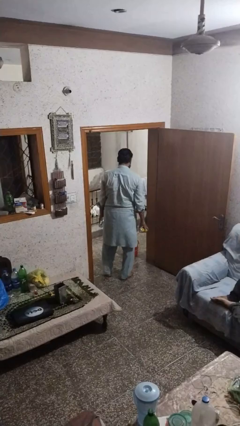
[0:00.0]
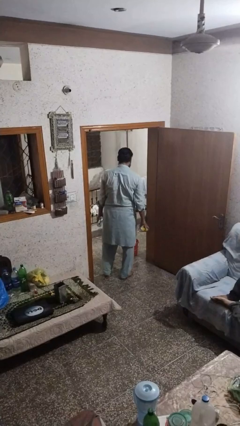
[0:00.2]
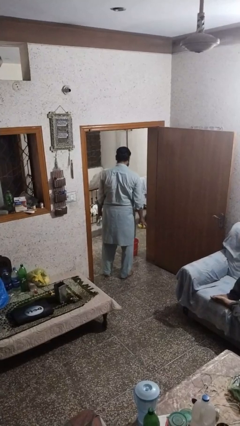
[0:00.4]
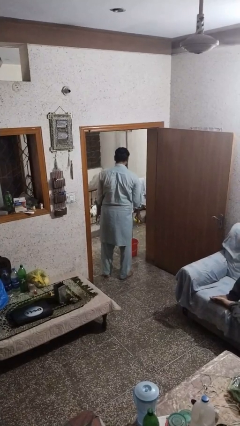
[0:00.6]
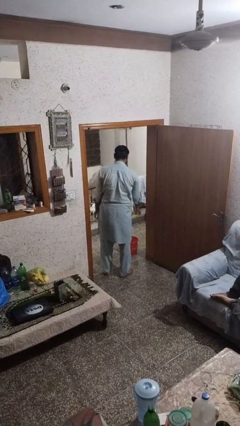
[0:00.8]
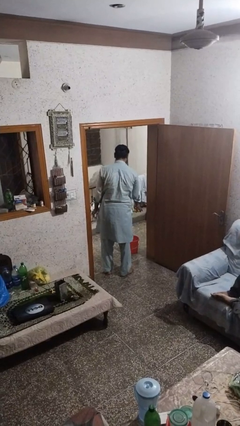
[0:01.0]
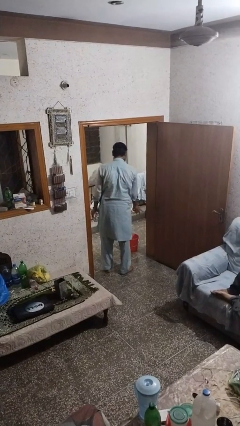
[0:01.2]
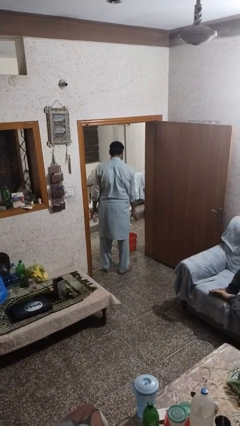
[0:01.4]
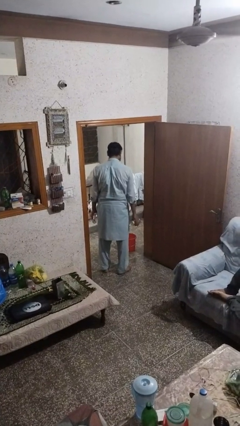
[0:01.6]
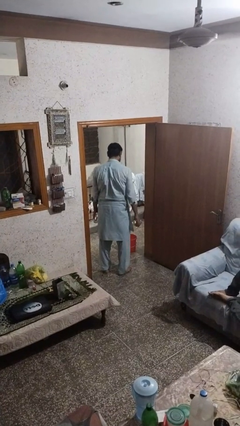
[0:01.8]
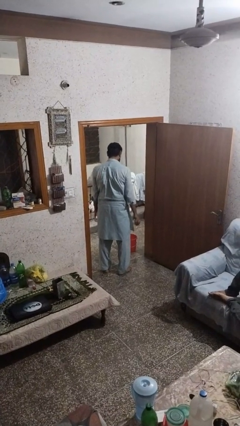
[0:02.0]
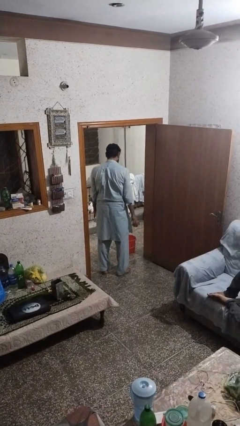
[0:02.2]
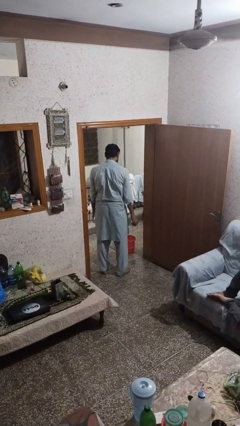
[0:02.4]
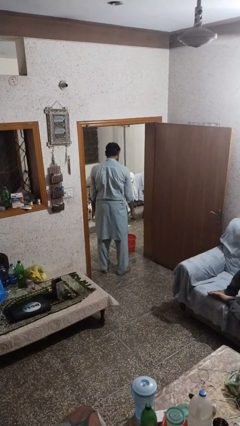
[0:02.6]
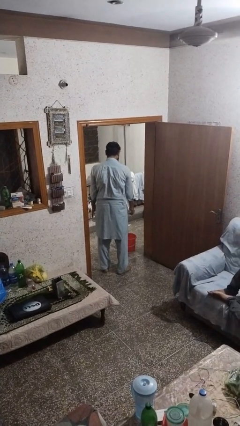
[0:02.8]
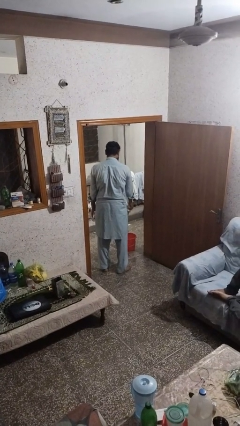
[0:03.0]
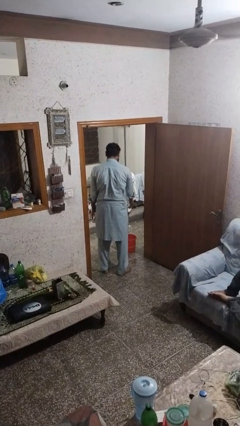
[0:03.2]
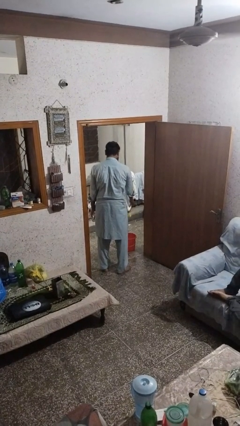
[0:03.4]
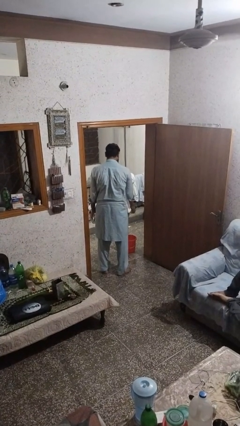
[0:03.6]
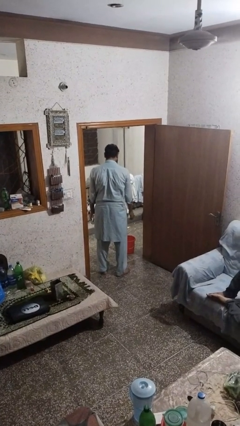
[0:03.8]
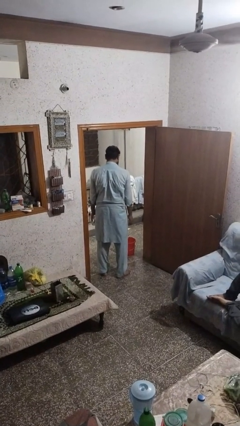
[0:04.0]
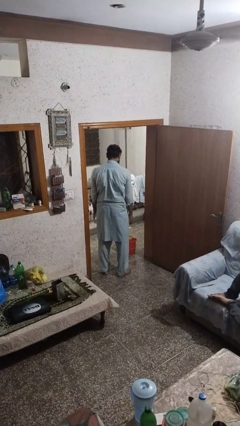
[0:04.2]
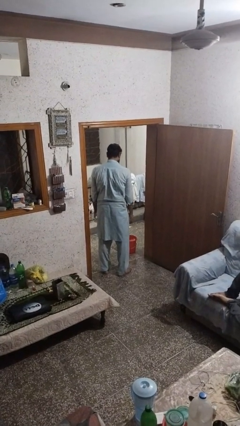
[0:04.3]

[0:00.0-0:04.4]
person discards trash

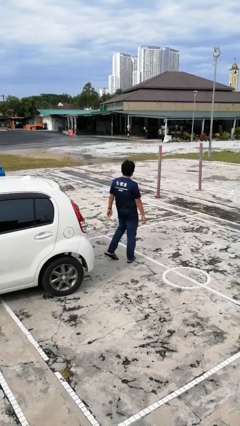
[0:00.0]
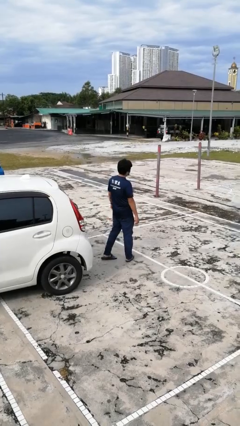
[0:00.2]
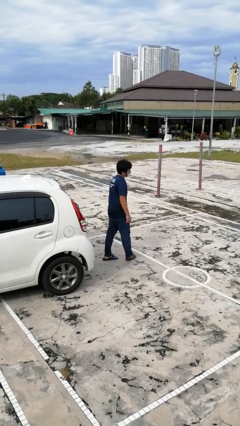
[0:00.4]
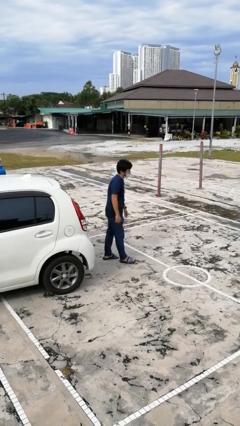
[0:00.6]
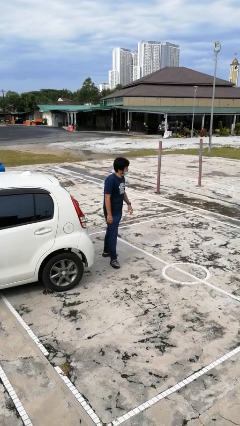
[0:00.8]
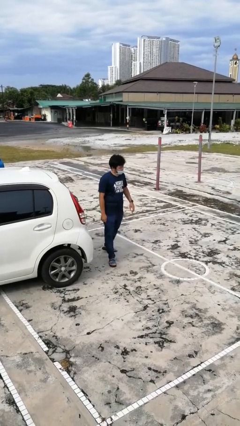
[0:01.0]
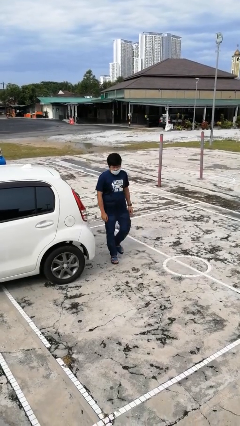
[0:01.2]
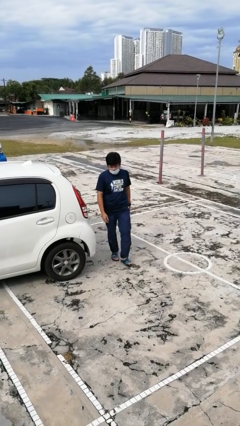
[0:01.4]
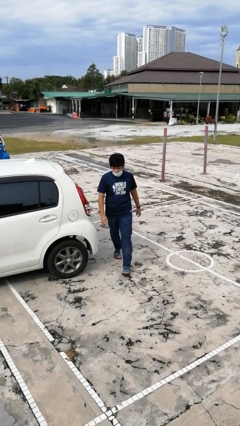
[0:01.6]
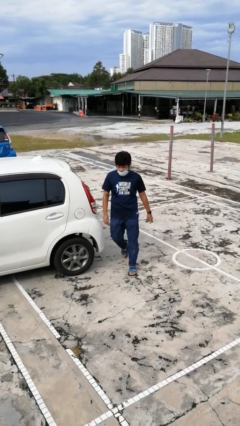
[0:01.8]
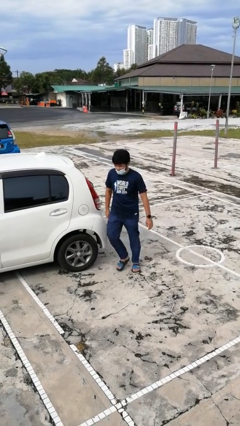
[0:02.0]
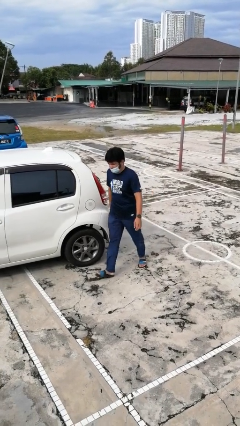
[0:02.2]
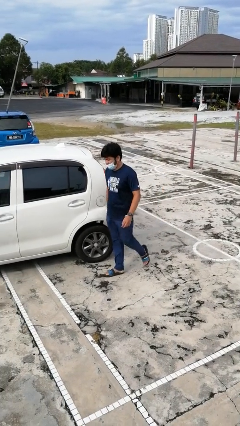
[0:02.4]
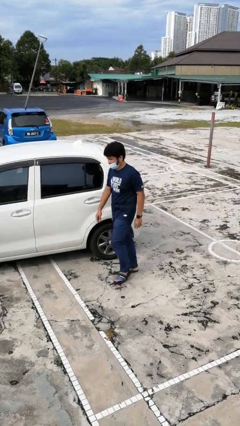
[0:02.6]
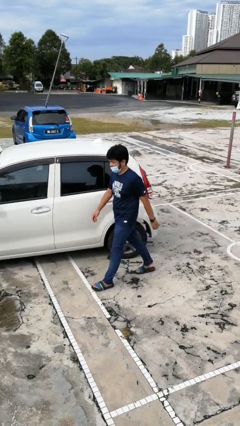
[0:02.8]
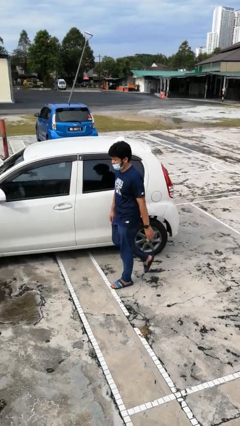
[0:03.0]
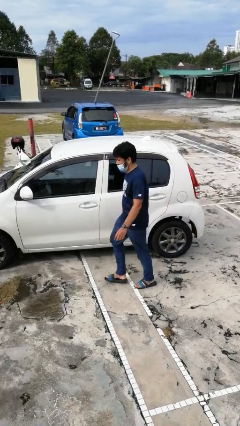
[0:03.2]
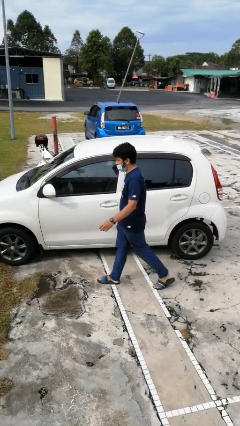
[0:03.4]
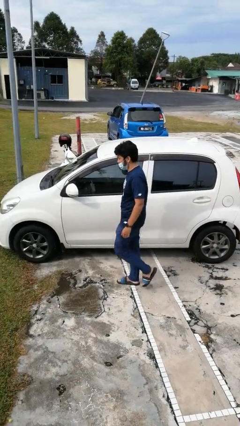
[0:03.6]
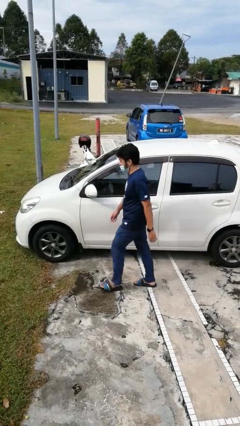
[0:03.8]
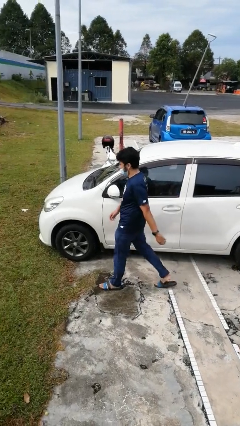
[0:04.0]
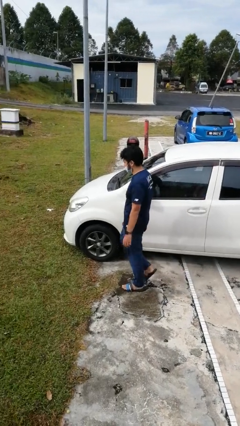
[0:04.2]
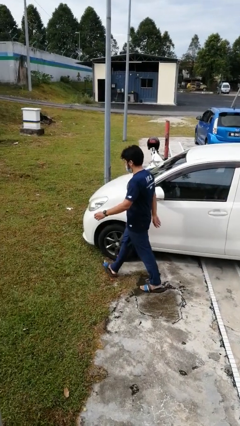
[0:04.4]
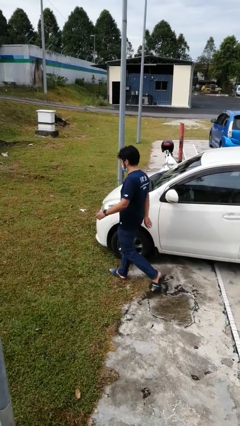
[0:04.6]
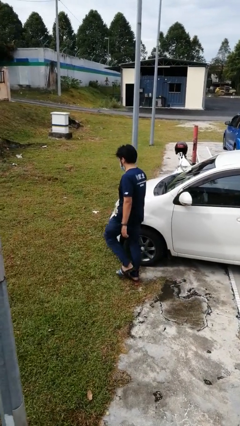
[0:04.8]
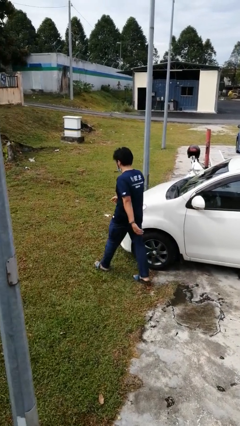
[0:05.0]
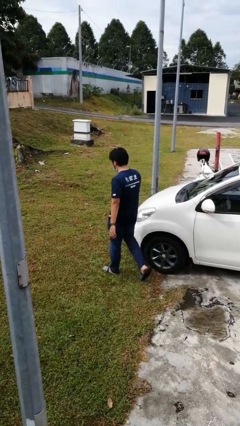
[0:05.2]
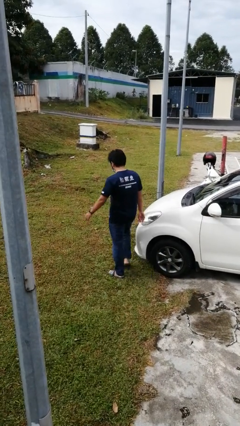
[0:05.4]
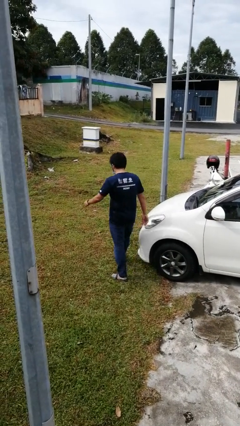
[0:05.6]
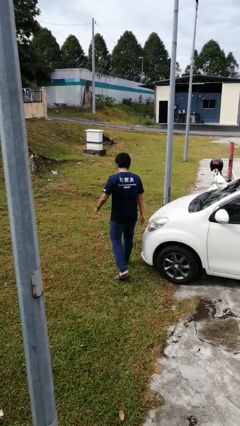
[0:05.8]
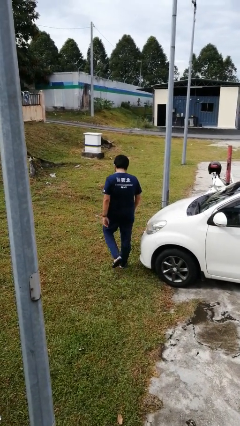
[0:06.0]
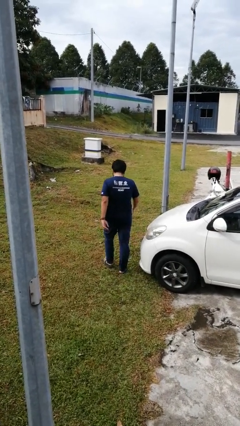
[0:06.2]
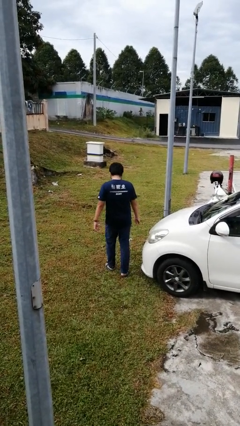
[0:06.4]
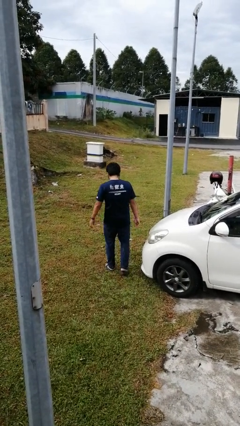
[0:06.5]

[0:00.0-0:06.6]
person walks around car

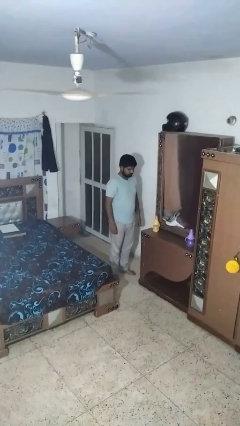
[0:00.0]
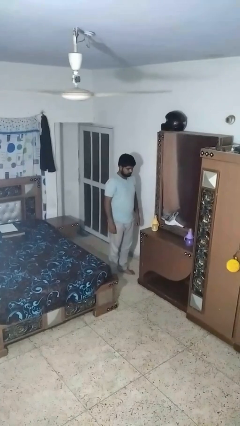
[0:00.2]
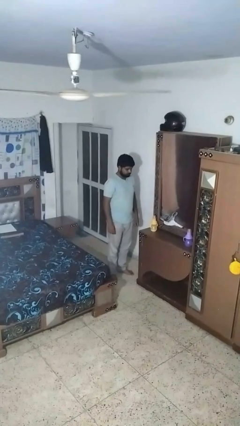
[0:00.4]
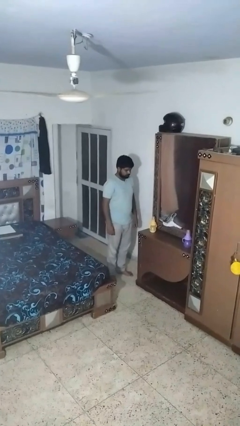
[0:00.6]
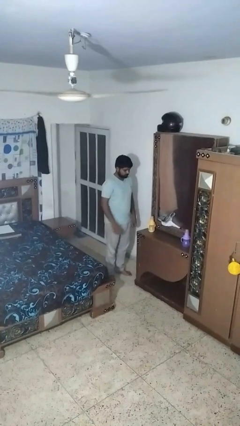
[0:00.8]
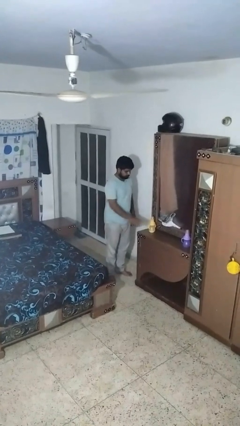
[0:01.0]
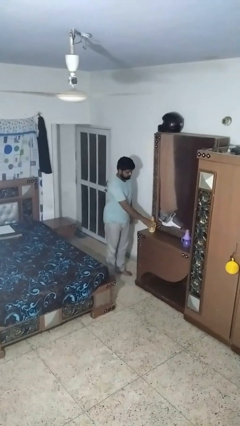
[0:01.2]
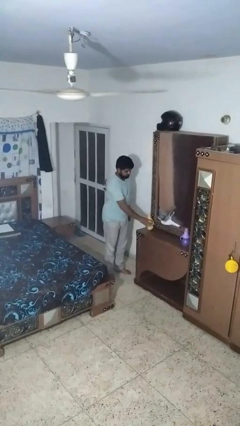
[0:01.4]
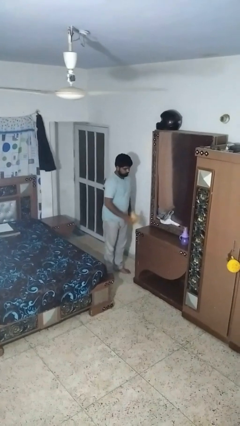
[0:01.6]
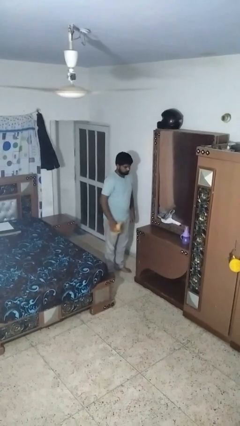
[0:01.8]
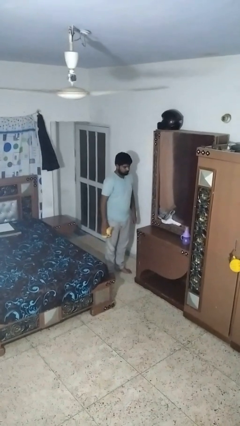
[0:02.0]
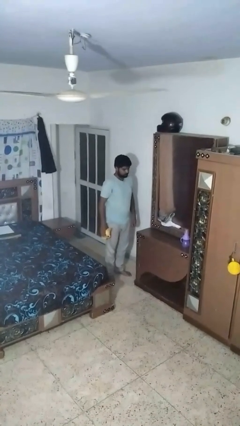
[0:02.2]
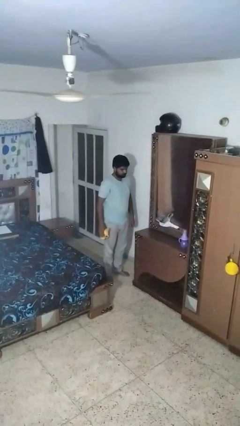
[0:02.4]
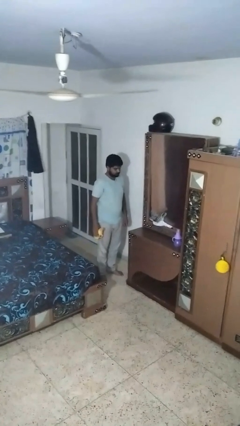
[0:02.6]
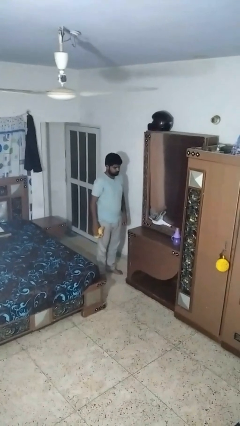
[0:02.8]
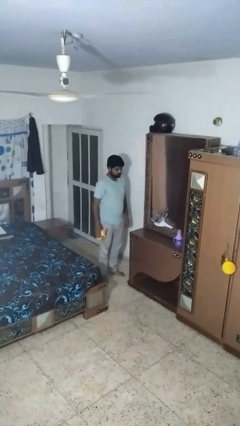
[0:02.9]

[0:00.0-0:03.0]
person picks up object from countertop

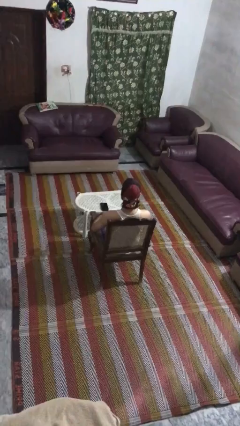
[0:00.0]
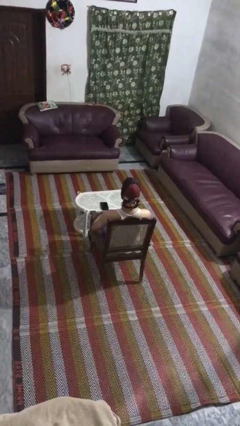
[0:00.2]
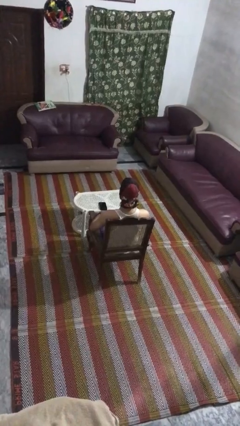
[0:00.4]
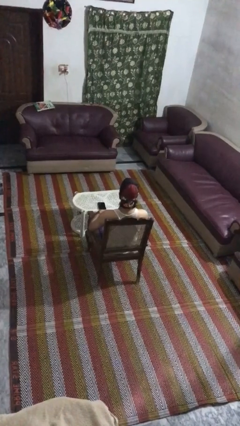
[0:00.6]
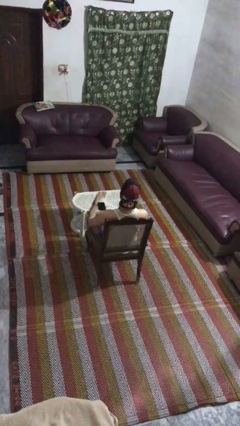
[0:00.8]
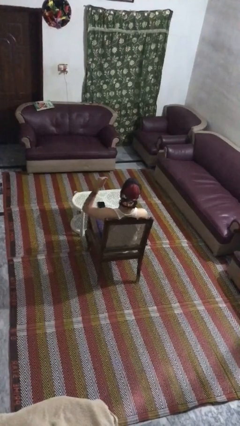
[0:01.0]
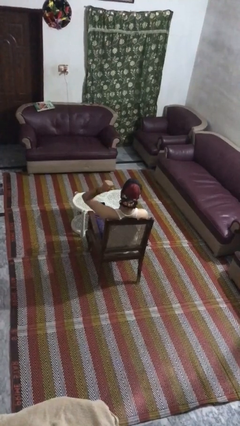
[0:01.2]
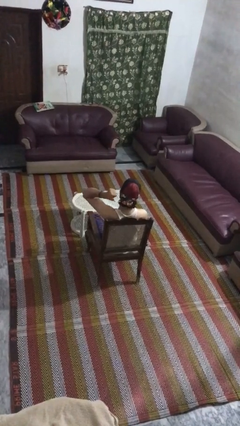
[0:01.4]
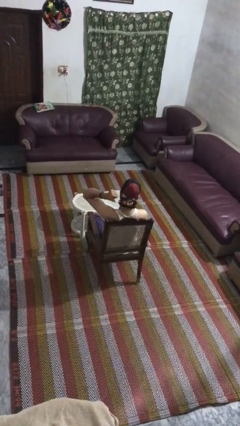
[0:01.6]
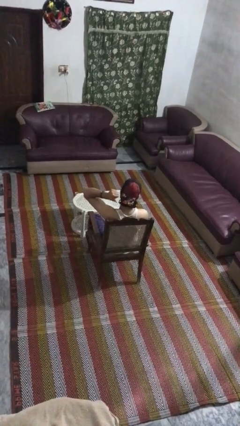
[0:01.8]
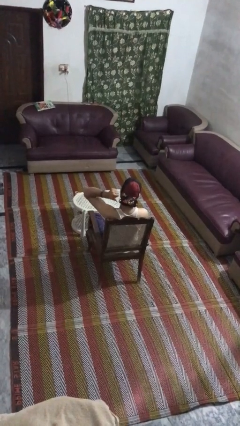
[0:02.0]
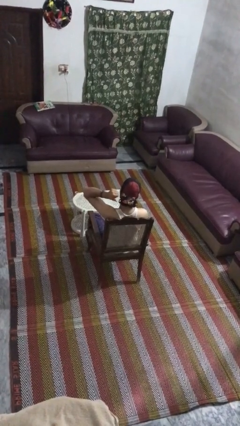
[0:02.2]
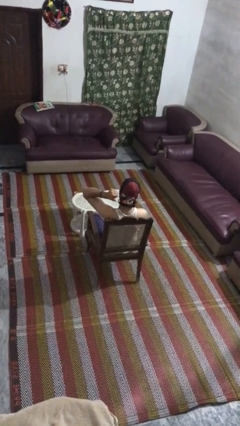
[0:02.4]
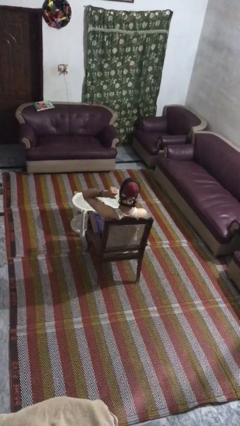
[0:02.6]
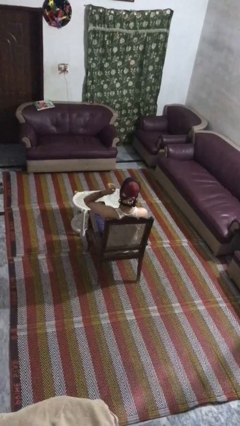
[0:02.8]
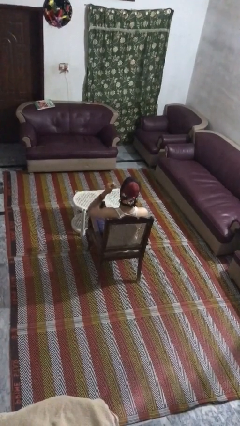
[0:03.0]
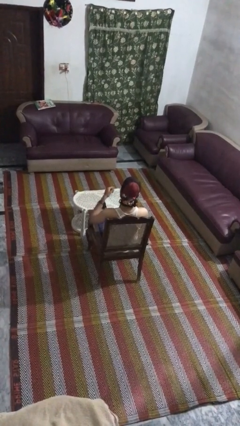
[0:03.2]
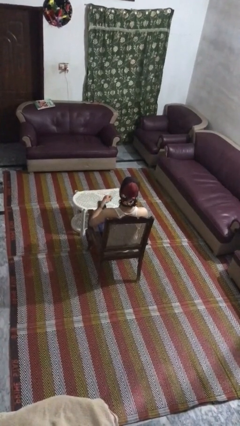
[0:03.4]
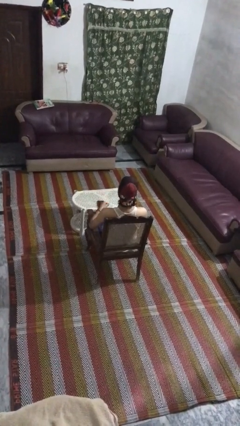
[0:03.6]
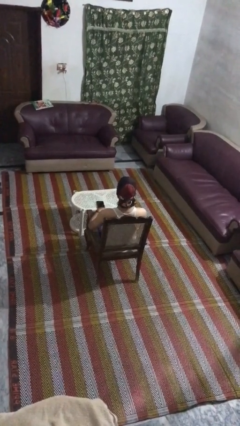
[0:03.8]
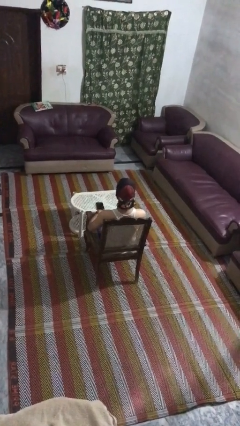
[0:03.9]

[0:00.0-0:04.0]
person gestures behind me
